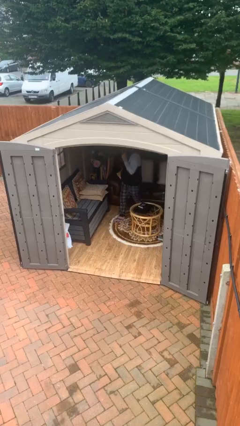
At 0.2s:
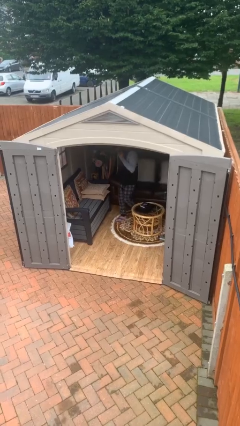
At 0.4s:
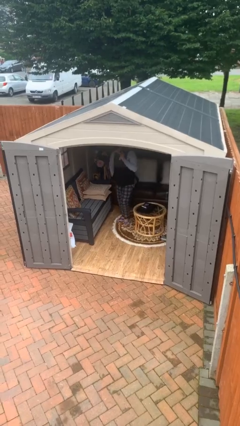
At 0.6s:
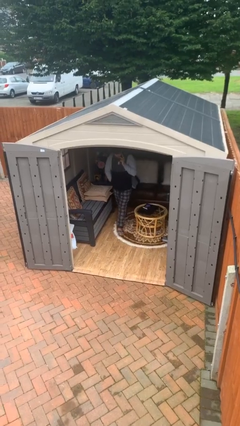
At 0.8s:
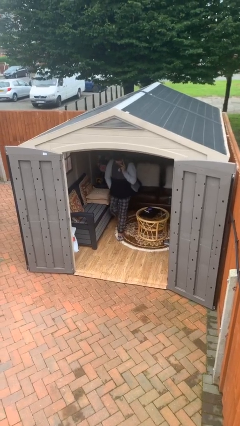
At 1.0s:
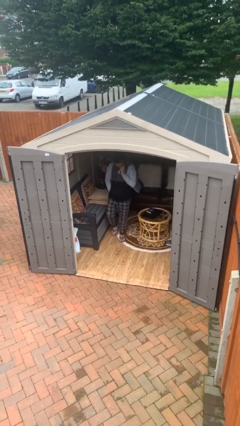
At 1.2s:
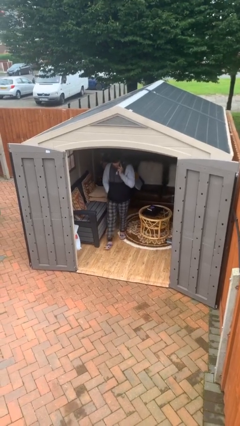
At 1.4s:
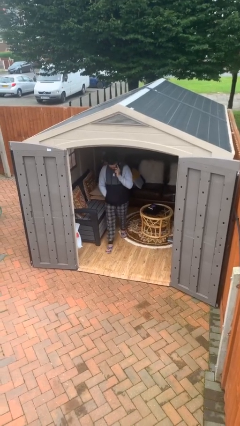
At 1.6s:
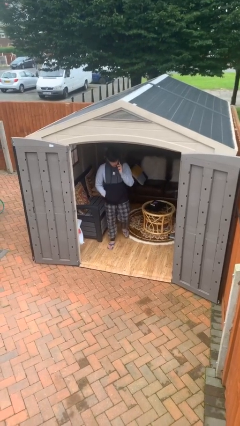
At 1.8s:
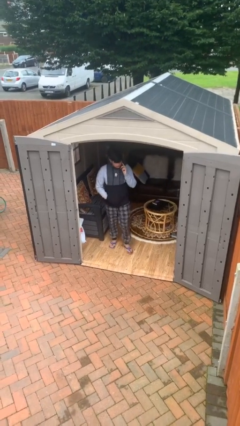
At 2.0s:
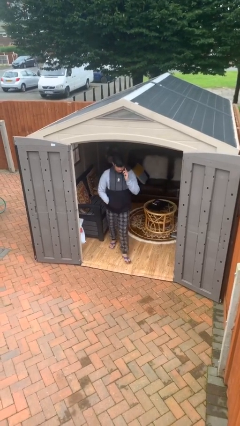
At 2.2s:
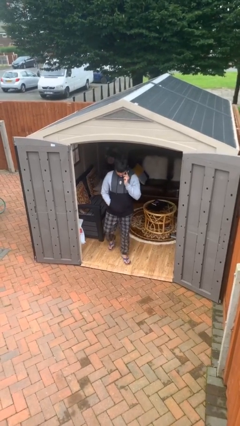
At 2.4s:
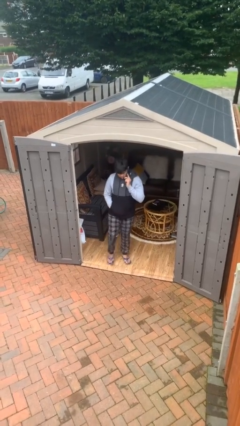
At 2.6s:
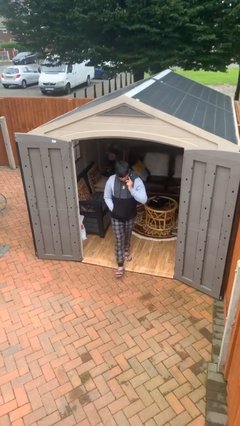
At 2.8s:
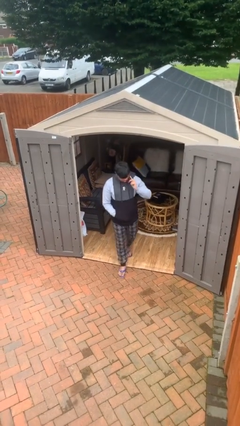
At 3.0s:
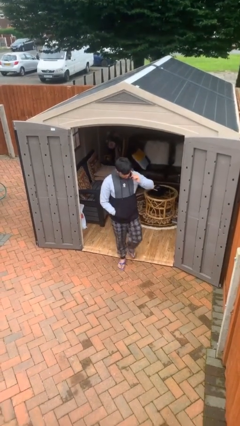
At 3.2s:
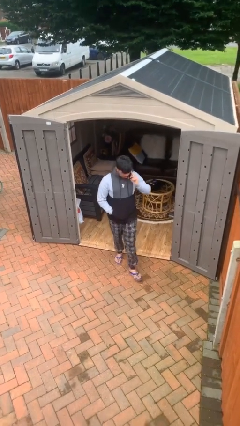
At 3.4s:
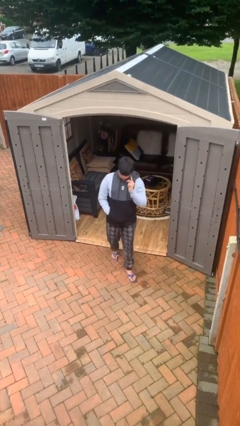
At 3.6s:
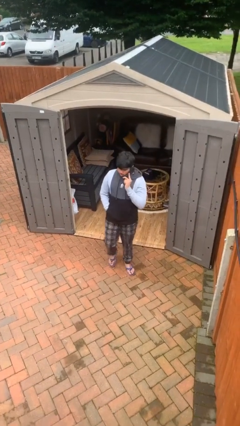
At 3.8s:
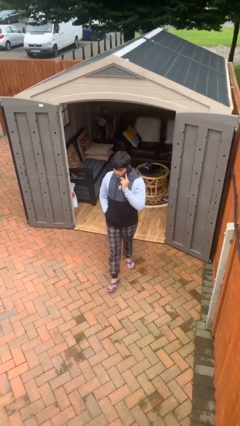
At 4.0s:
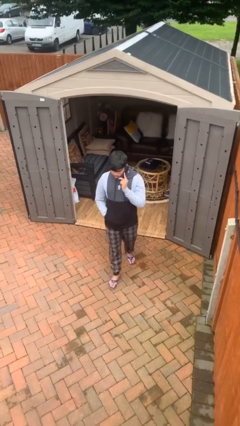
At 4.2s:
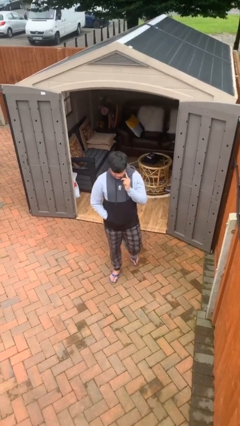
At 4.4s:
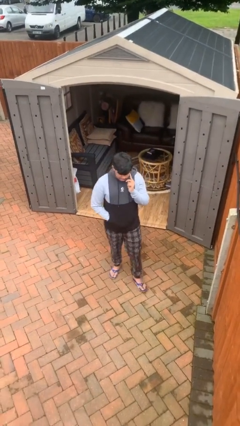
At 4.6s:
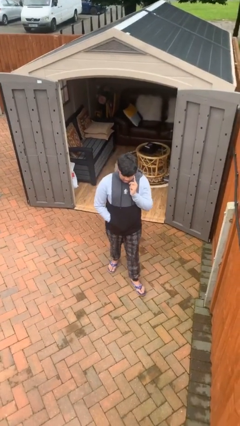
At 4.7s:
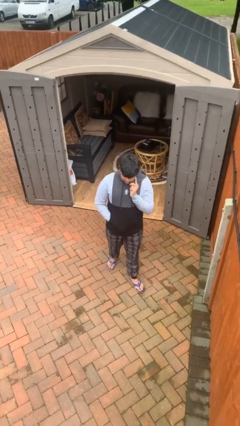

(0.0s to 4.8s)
person enters scene through structure

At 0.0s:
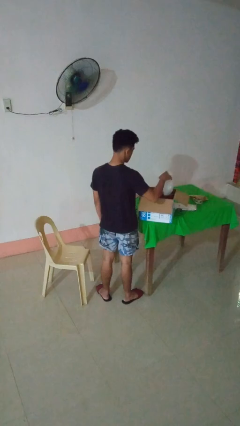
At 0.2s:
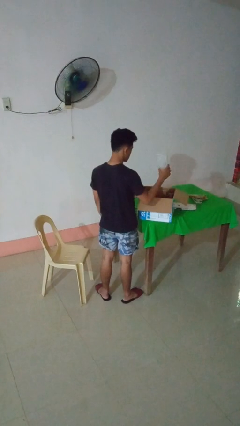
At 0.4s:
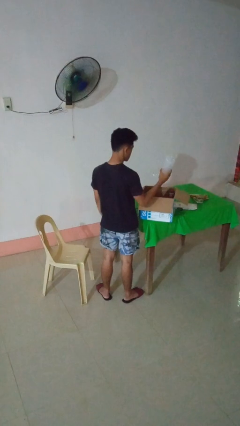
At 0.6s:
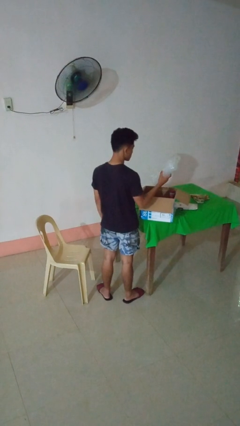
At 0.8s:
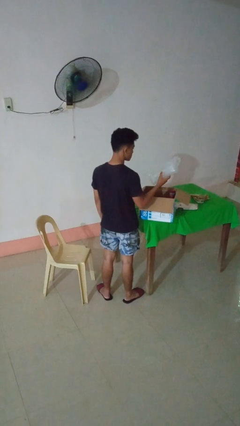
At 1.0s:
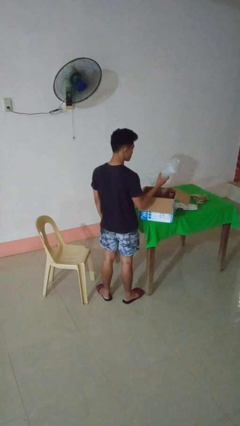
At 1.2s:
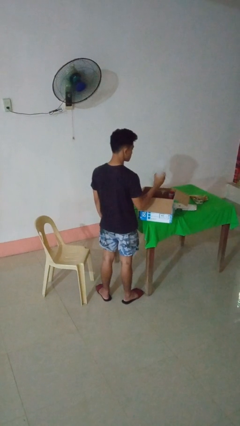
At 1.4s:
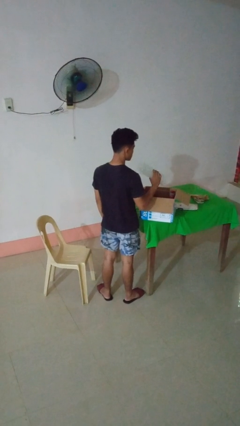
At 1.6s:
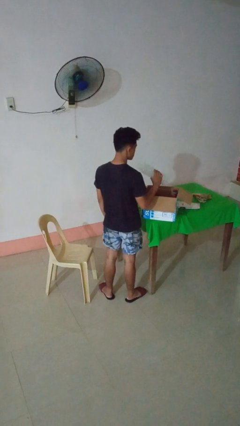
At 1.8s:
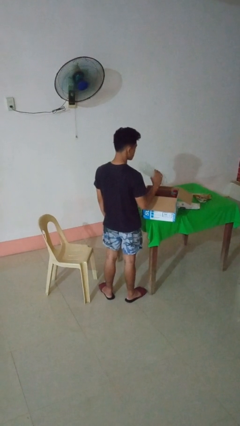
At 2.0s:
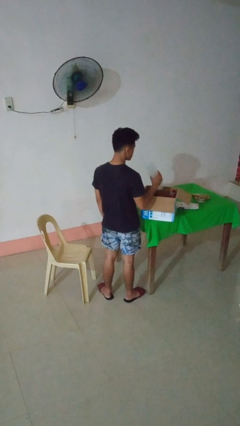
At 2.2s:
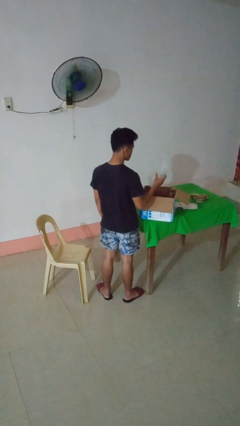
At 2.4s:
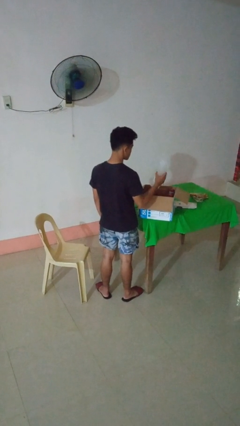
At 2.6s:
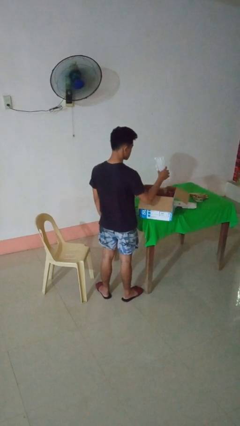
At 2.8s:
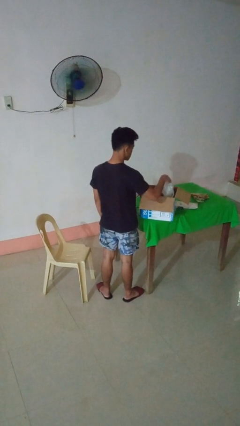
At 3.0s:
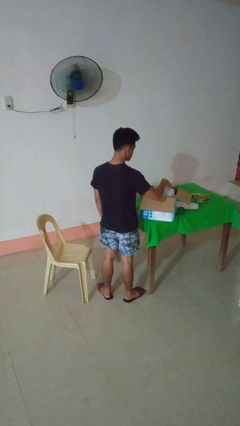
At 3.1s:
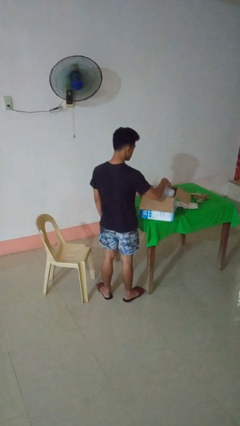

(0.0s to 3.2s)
person takes object from box

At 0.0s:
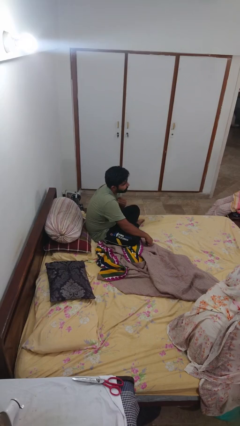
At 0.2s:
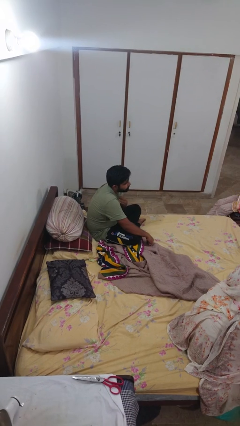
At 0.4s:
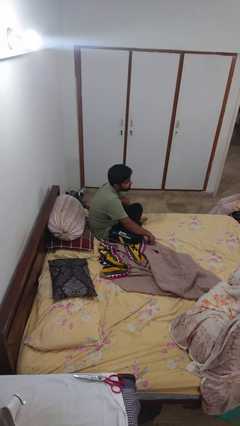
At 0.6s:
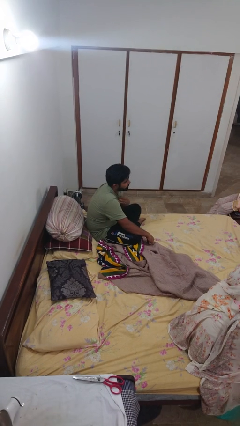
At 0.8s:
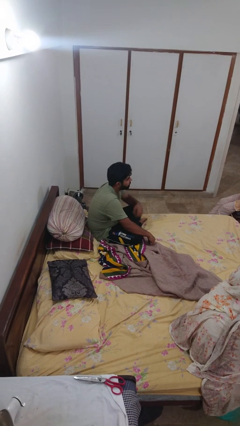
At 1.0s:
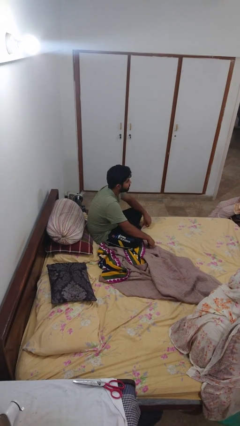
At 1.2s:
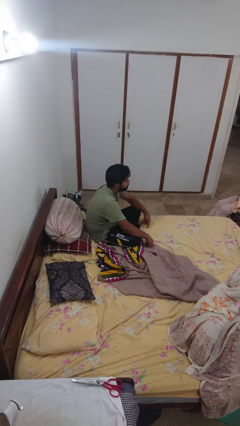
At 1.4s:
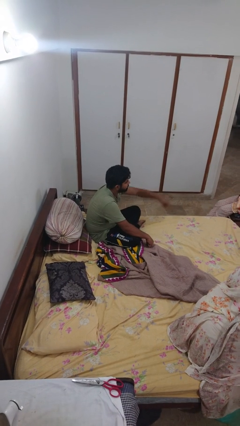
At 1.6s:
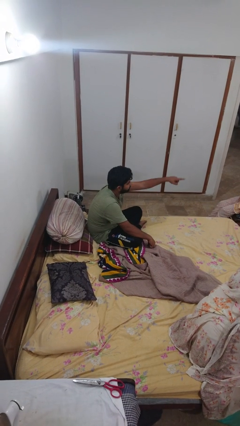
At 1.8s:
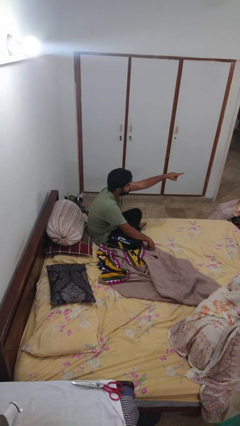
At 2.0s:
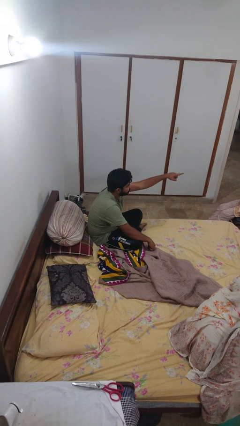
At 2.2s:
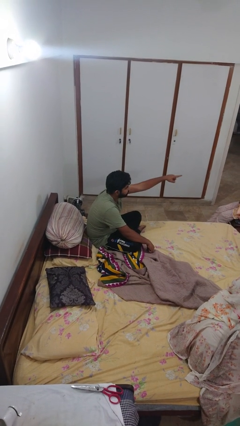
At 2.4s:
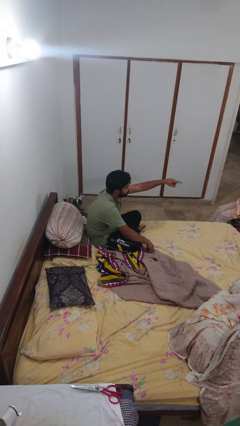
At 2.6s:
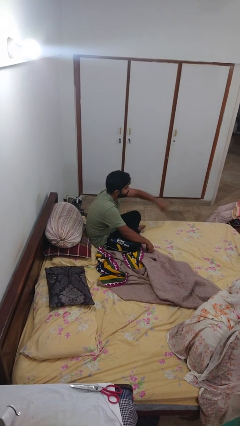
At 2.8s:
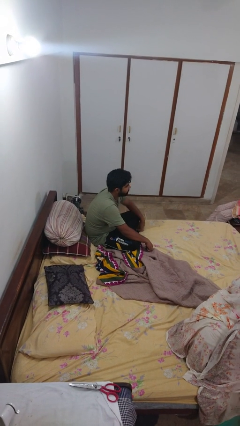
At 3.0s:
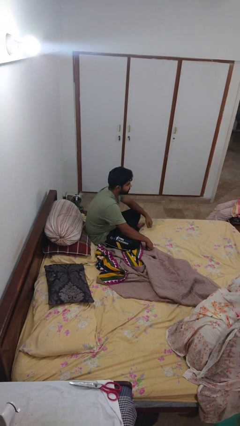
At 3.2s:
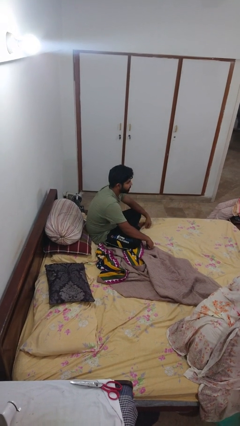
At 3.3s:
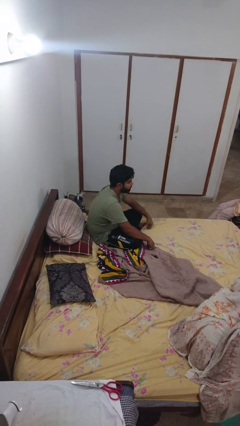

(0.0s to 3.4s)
person points at person

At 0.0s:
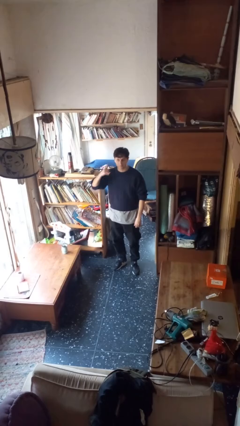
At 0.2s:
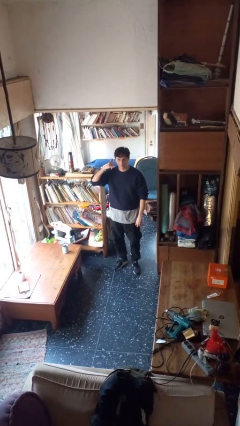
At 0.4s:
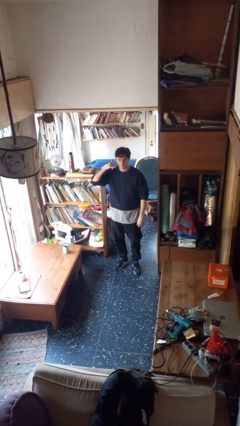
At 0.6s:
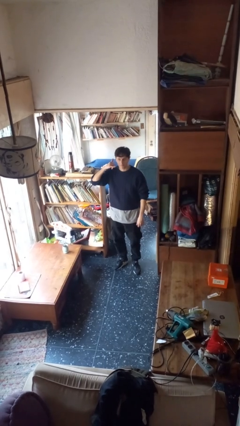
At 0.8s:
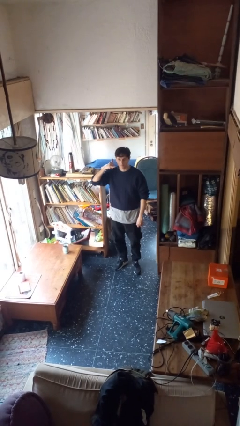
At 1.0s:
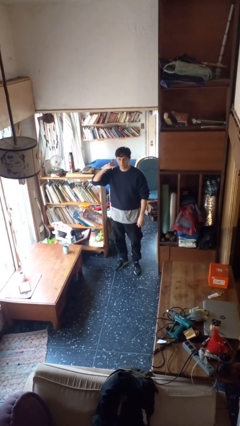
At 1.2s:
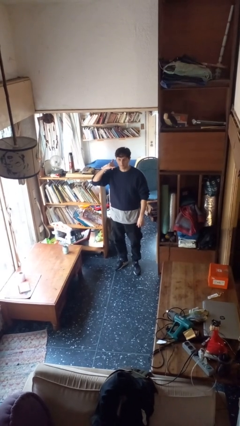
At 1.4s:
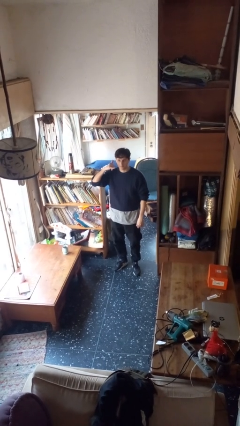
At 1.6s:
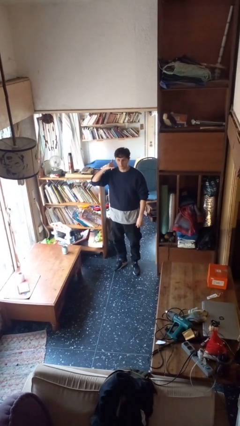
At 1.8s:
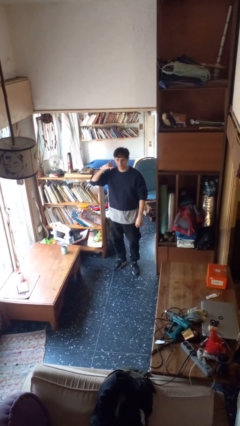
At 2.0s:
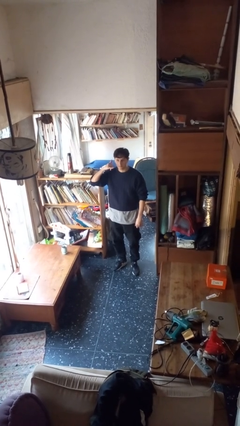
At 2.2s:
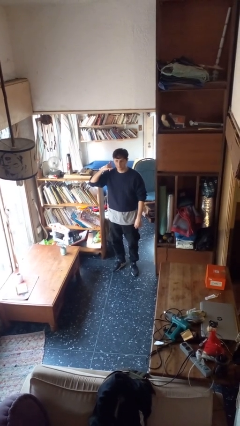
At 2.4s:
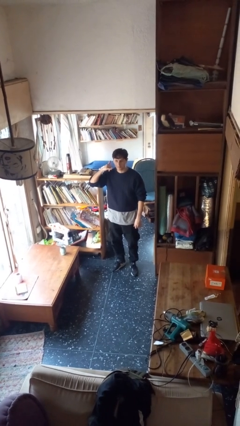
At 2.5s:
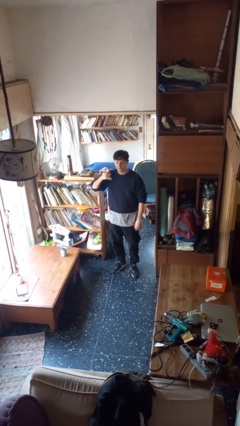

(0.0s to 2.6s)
person gestures call me

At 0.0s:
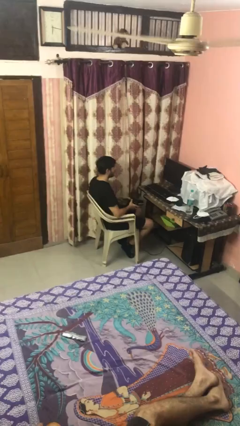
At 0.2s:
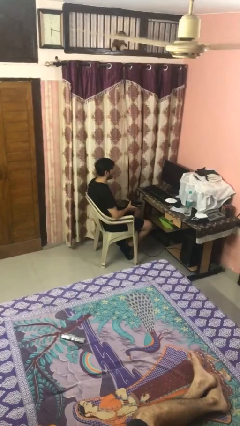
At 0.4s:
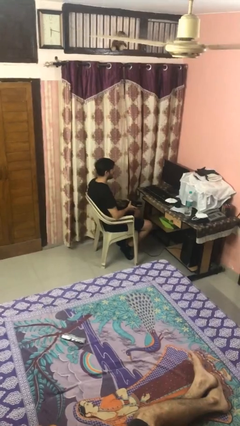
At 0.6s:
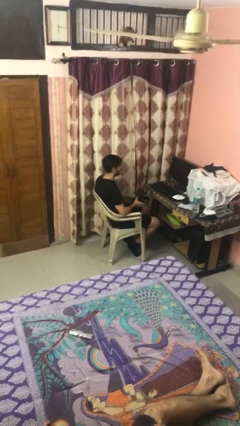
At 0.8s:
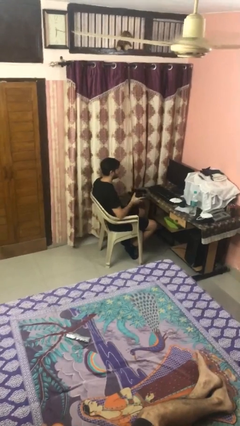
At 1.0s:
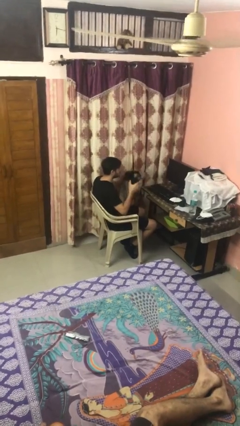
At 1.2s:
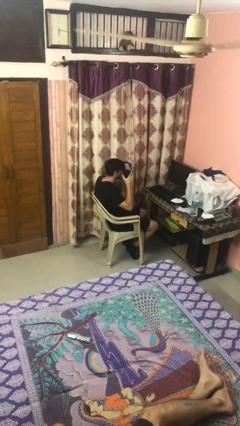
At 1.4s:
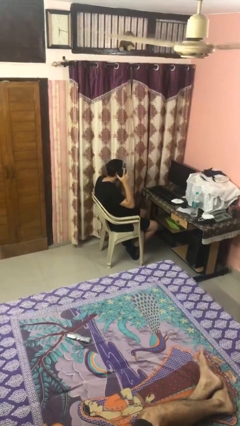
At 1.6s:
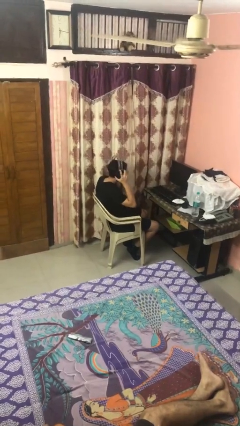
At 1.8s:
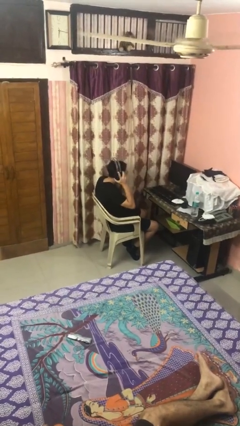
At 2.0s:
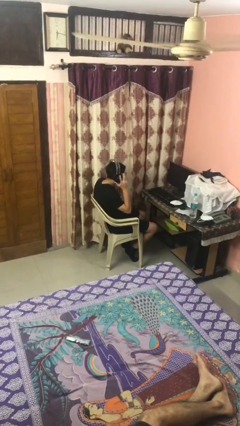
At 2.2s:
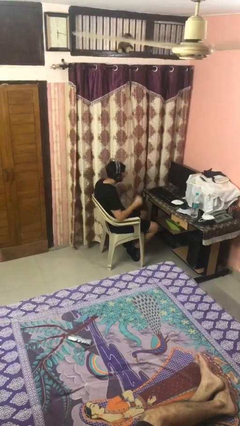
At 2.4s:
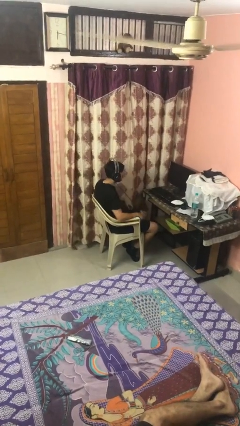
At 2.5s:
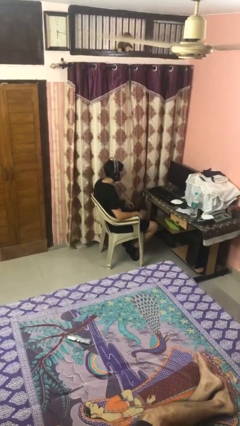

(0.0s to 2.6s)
person puts on headphones

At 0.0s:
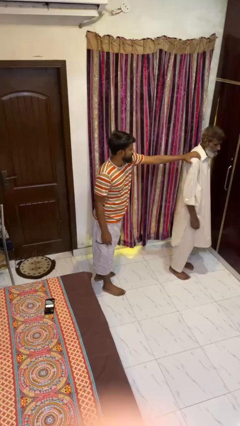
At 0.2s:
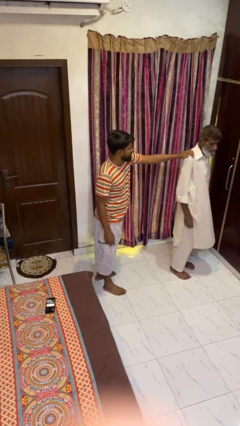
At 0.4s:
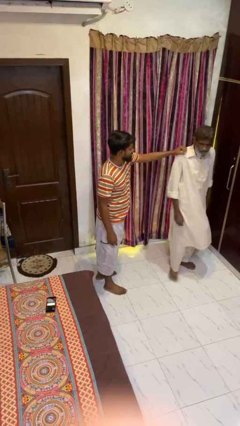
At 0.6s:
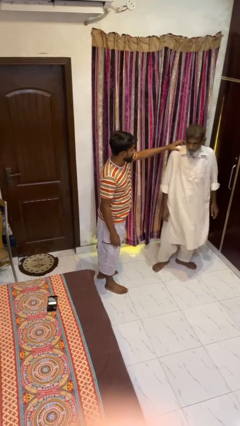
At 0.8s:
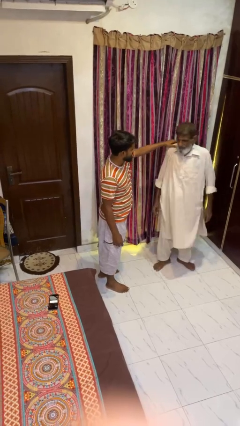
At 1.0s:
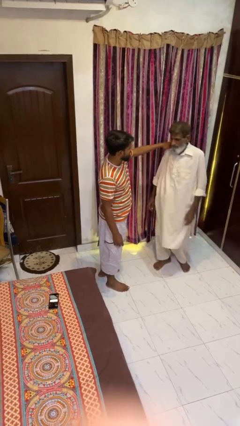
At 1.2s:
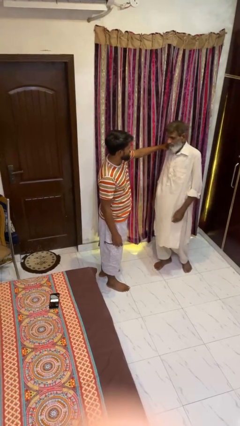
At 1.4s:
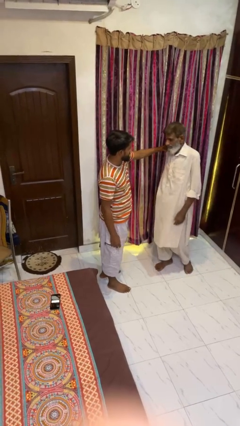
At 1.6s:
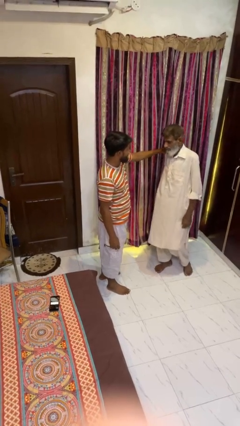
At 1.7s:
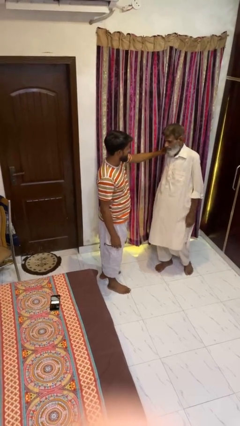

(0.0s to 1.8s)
person spins person around
